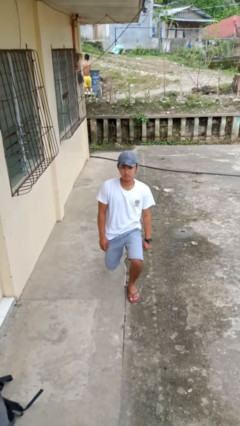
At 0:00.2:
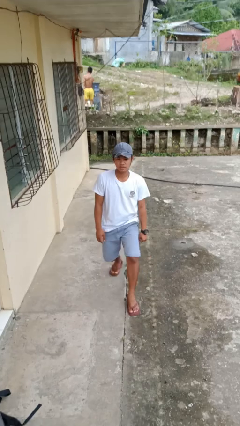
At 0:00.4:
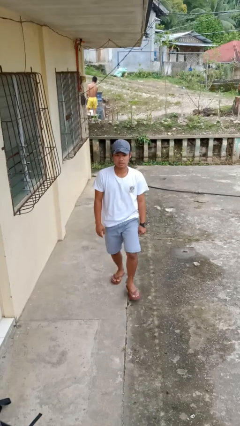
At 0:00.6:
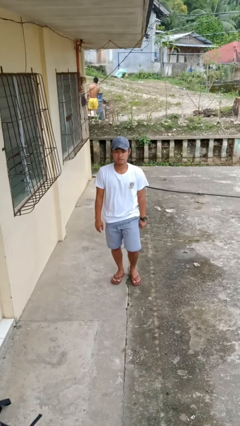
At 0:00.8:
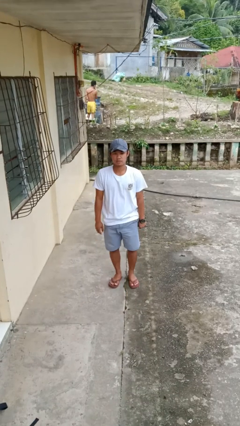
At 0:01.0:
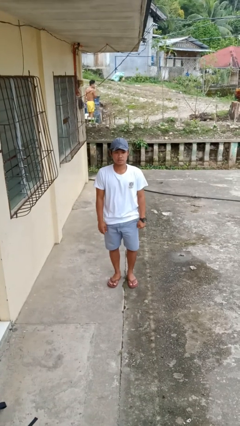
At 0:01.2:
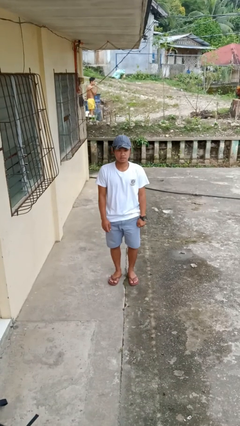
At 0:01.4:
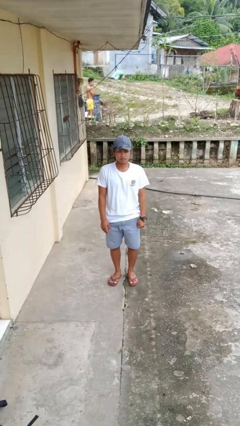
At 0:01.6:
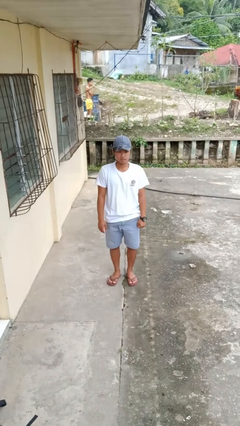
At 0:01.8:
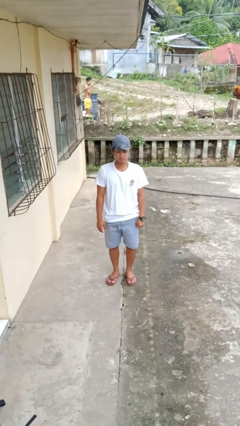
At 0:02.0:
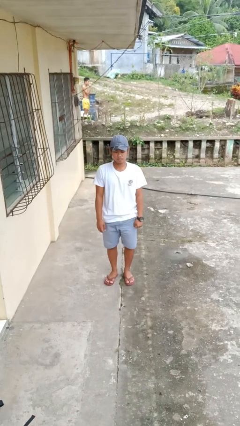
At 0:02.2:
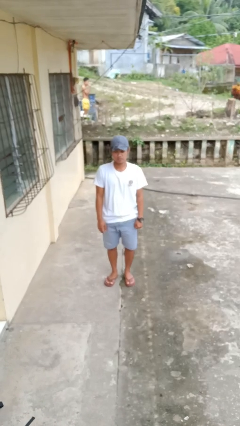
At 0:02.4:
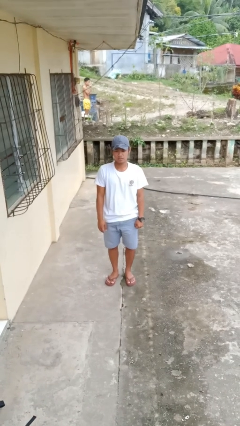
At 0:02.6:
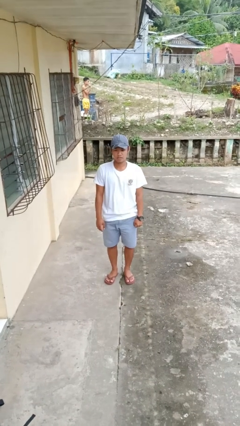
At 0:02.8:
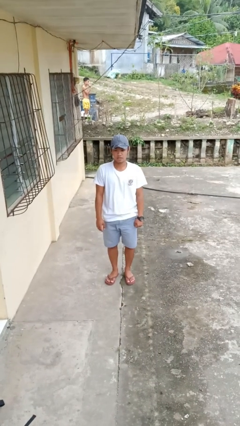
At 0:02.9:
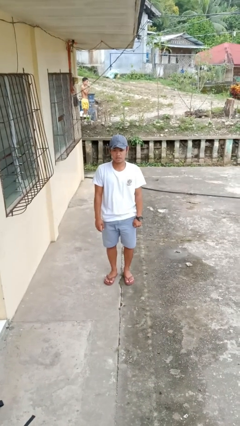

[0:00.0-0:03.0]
person stands up from floor

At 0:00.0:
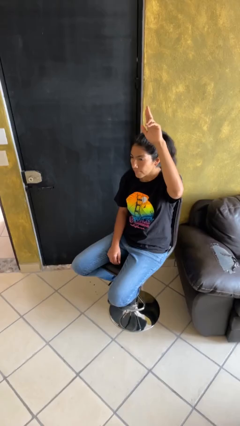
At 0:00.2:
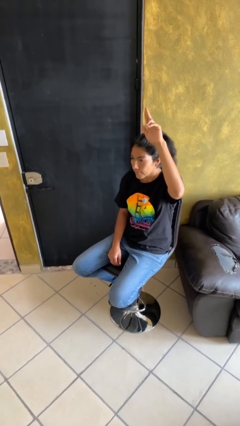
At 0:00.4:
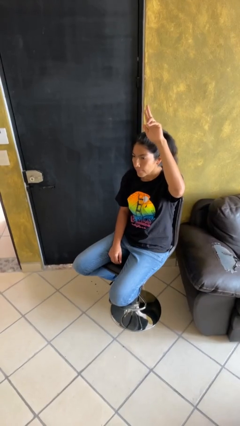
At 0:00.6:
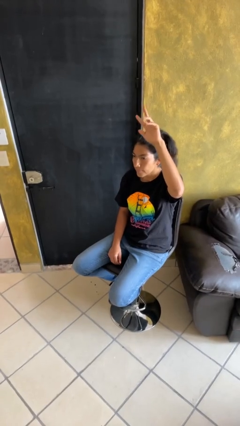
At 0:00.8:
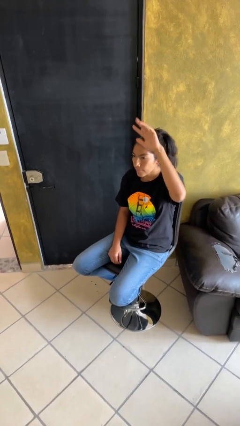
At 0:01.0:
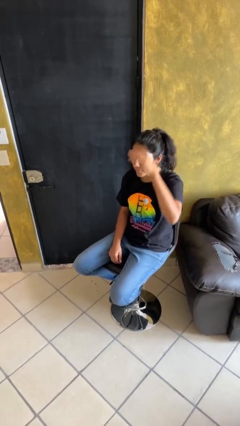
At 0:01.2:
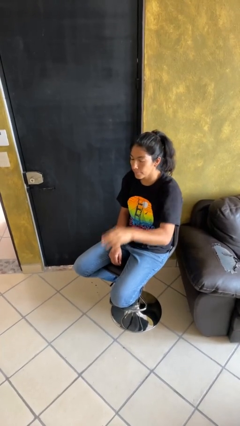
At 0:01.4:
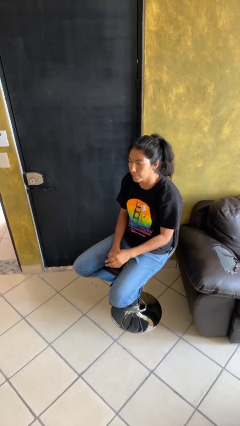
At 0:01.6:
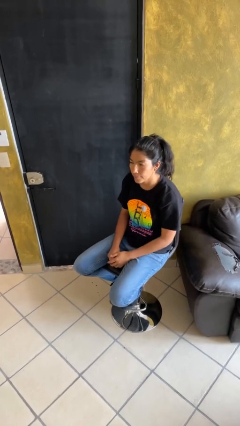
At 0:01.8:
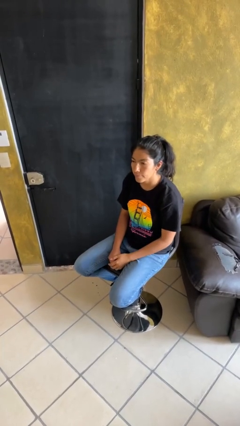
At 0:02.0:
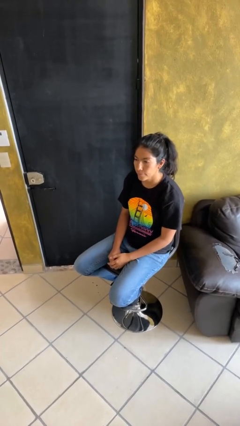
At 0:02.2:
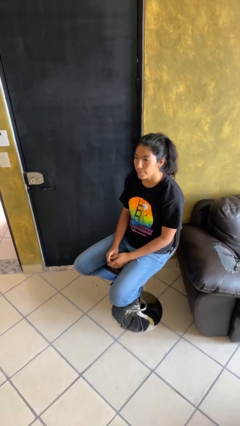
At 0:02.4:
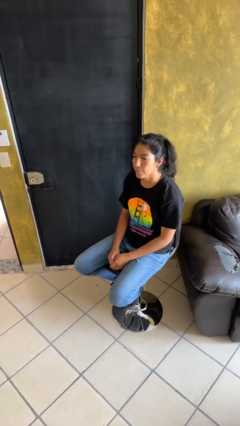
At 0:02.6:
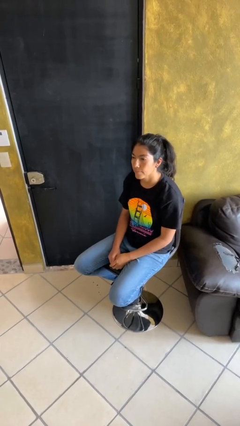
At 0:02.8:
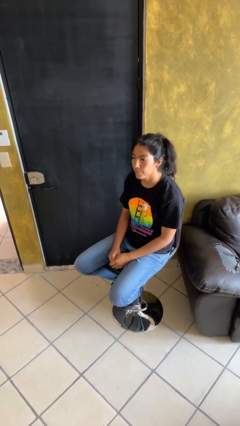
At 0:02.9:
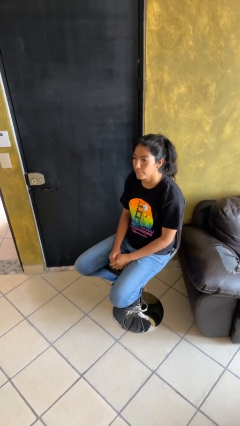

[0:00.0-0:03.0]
person gestures lower hand

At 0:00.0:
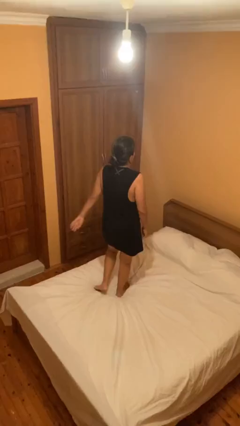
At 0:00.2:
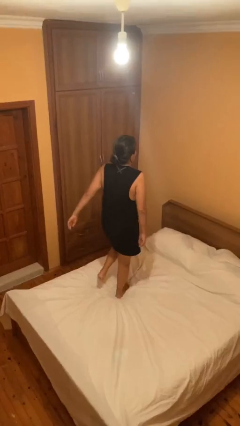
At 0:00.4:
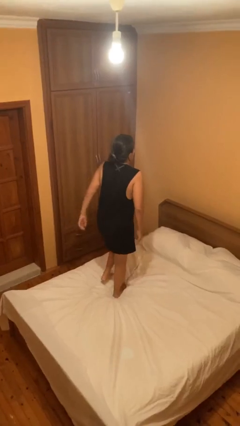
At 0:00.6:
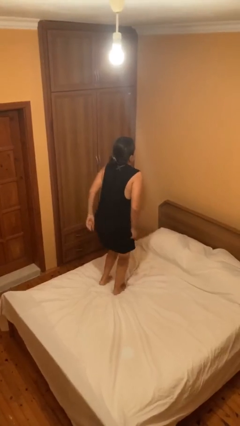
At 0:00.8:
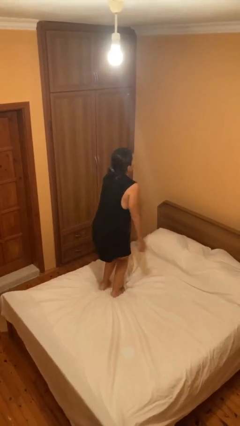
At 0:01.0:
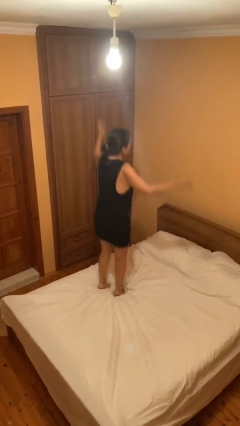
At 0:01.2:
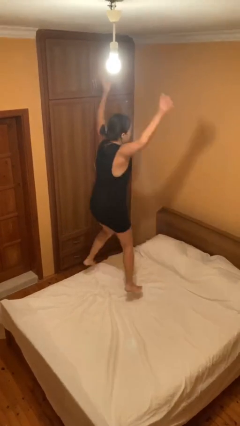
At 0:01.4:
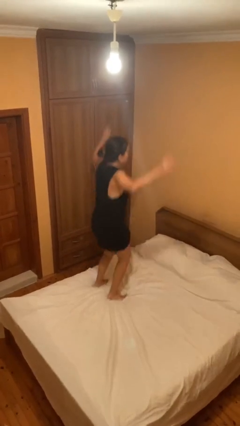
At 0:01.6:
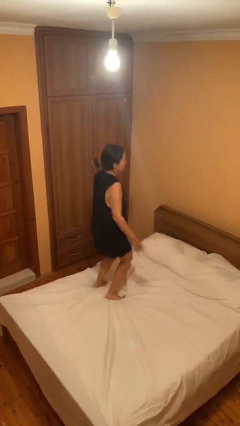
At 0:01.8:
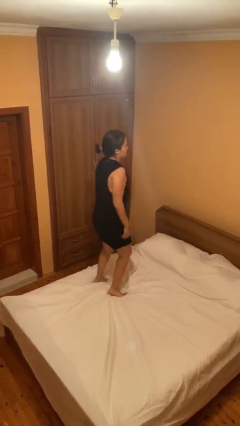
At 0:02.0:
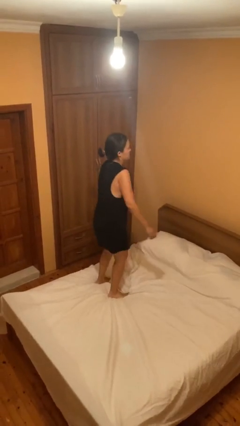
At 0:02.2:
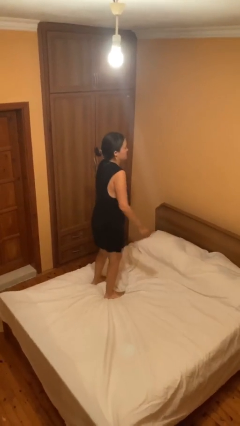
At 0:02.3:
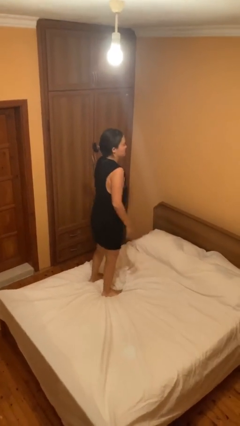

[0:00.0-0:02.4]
person jumps on bed

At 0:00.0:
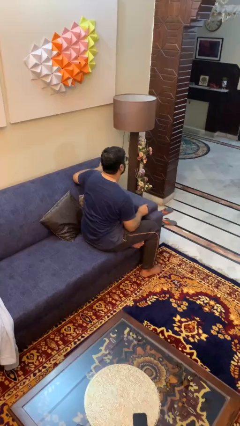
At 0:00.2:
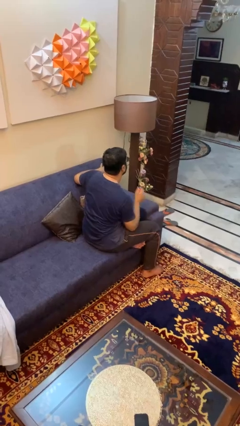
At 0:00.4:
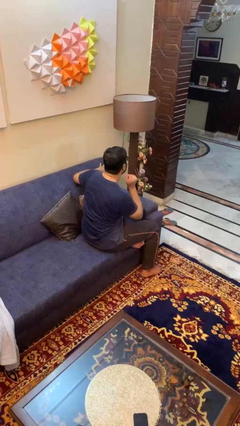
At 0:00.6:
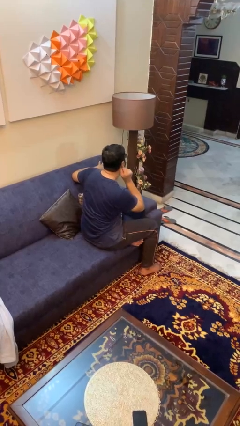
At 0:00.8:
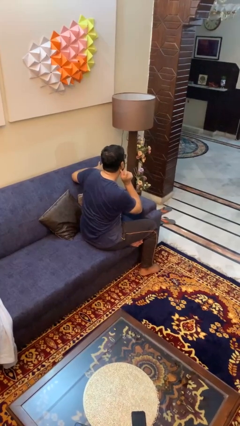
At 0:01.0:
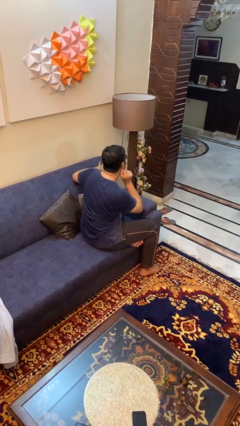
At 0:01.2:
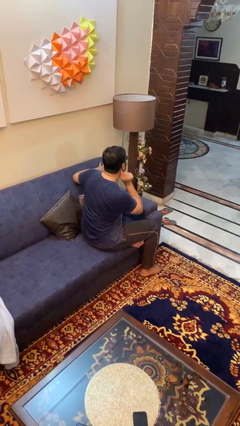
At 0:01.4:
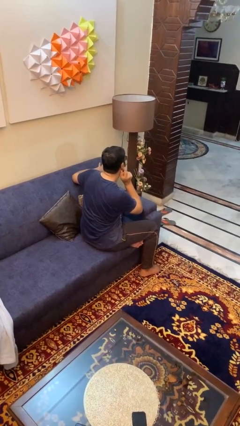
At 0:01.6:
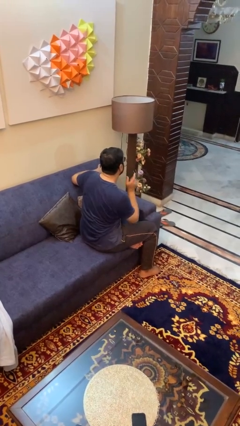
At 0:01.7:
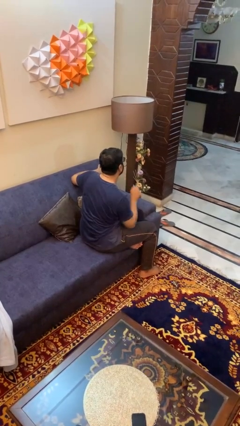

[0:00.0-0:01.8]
person touches earlobe

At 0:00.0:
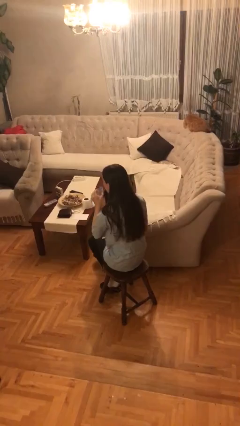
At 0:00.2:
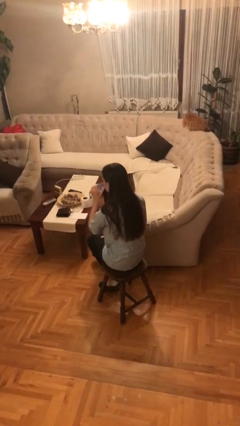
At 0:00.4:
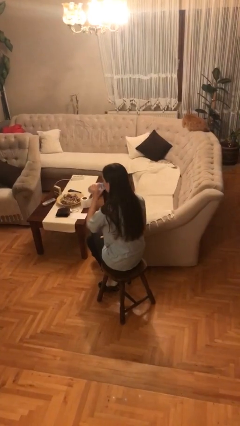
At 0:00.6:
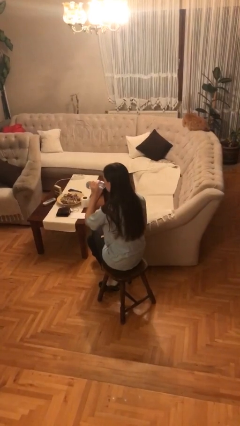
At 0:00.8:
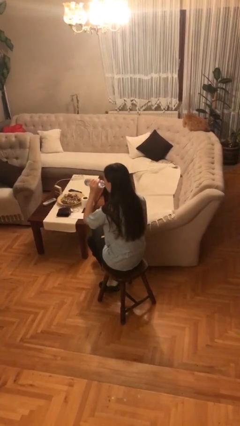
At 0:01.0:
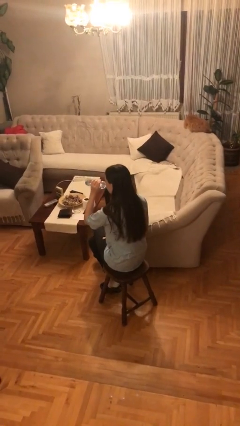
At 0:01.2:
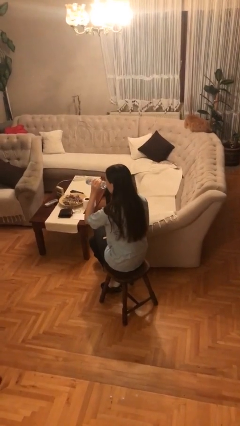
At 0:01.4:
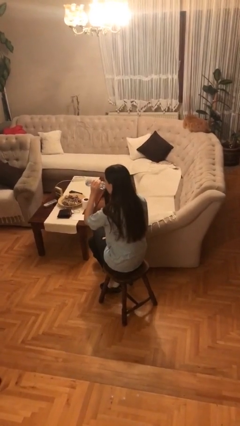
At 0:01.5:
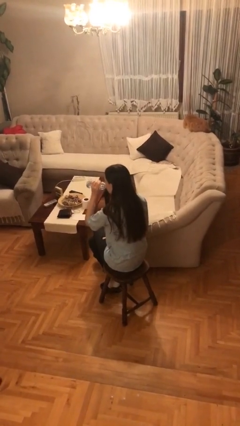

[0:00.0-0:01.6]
person drinks from bottle

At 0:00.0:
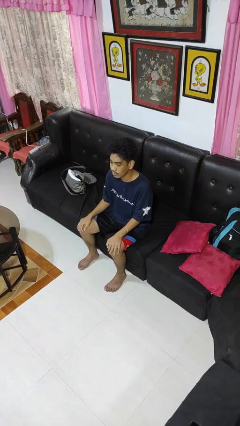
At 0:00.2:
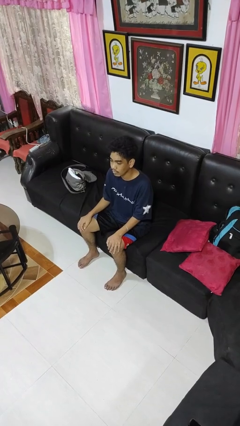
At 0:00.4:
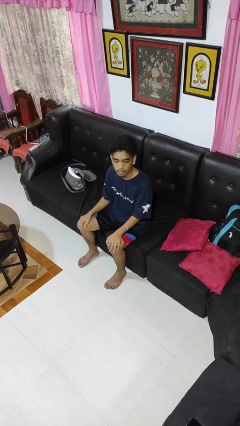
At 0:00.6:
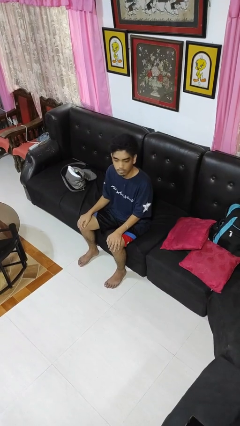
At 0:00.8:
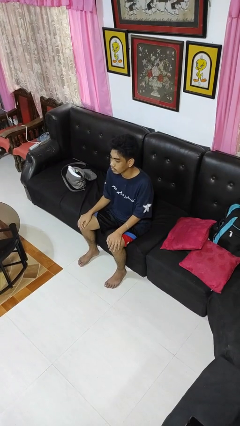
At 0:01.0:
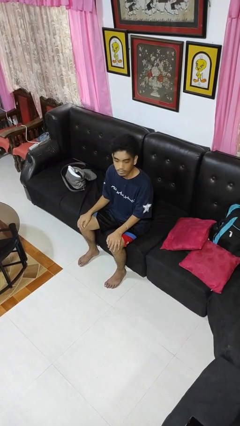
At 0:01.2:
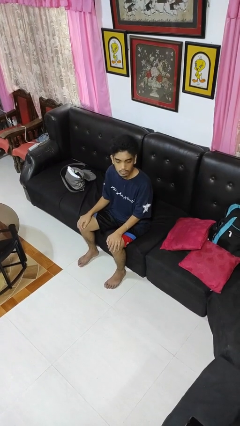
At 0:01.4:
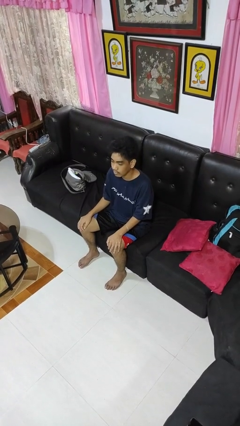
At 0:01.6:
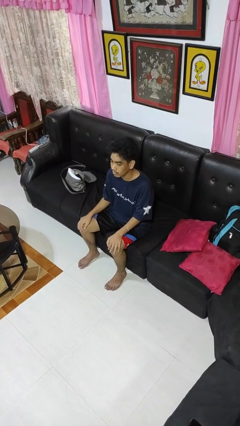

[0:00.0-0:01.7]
person shakes head

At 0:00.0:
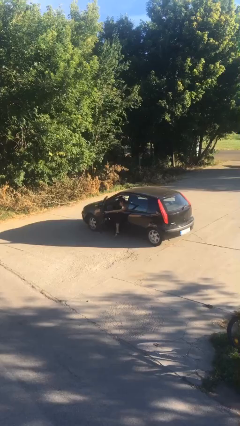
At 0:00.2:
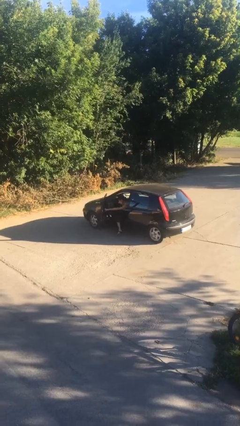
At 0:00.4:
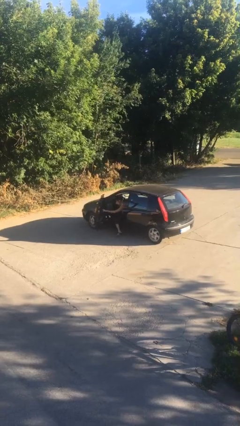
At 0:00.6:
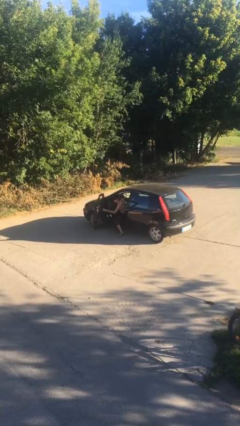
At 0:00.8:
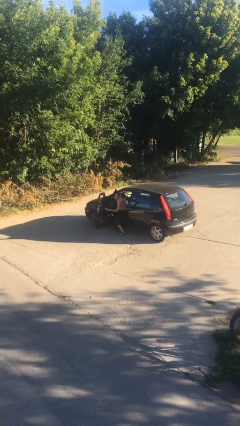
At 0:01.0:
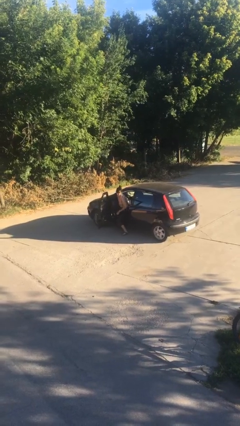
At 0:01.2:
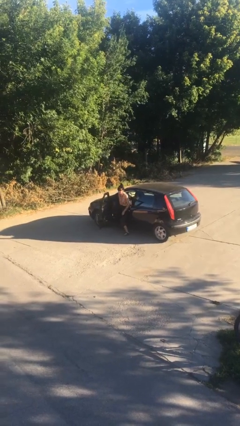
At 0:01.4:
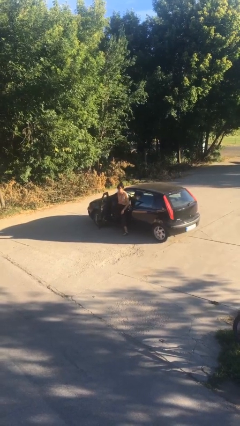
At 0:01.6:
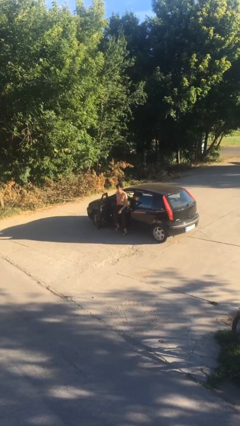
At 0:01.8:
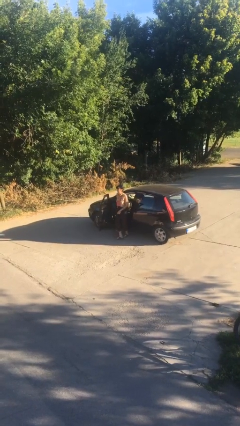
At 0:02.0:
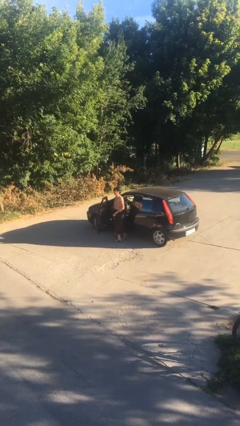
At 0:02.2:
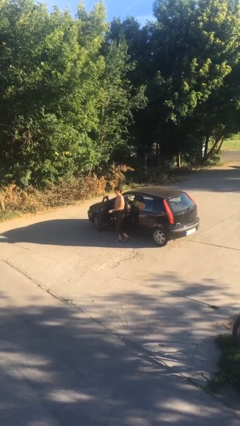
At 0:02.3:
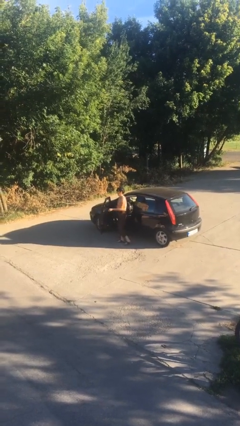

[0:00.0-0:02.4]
person exits car

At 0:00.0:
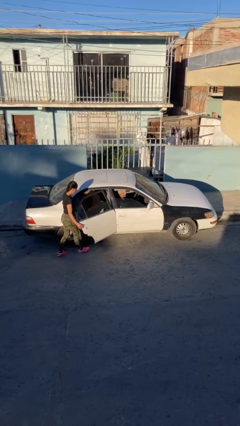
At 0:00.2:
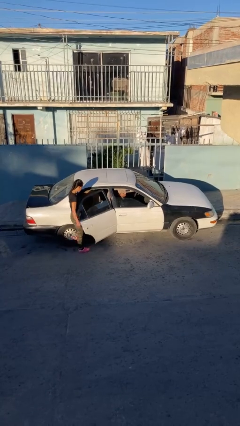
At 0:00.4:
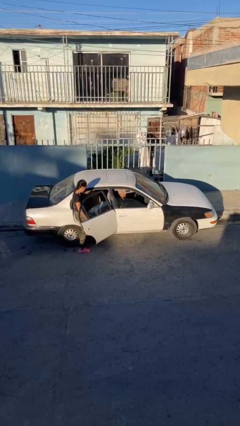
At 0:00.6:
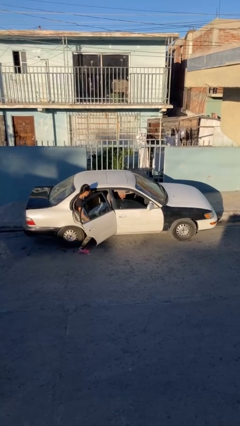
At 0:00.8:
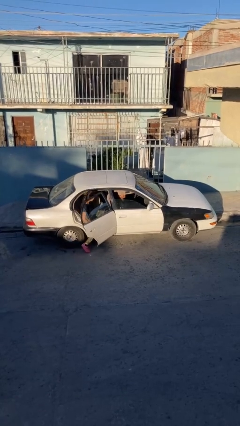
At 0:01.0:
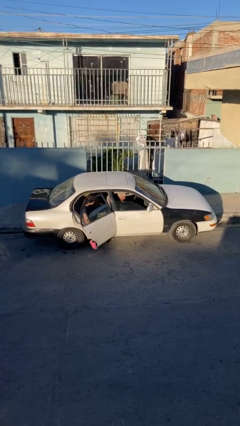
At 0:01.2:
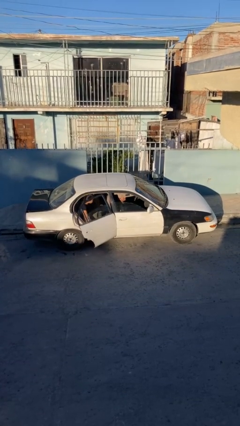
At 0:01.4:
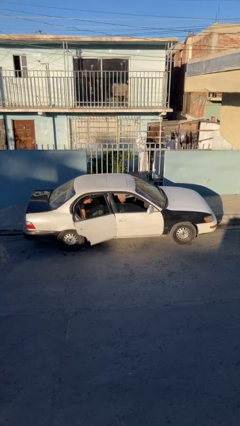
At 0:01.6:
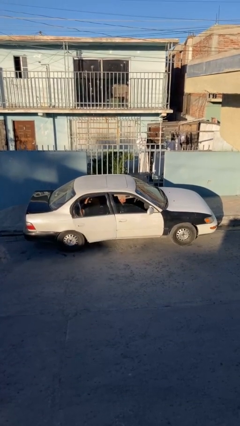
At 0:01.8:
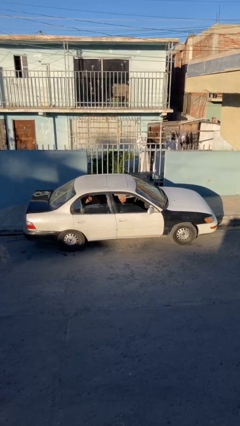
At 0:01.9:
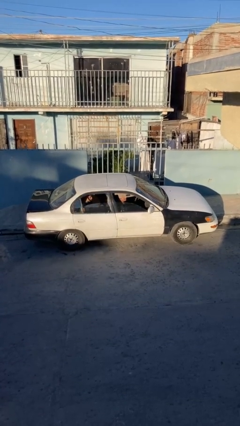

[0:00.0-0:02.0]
car picks up person
